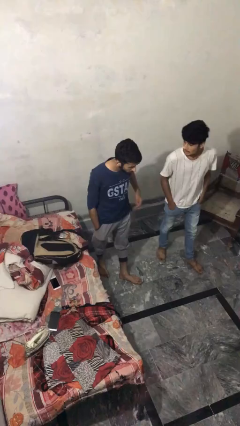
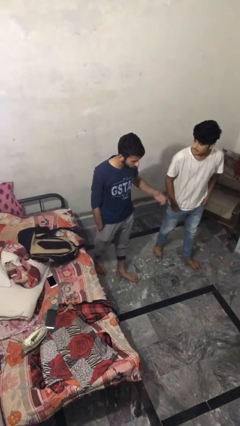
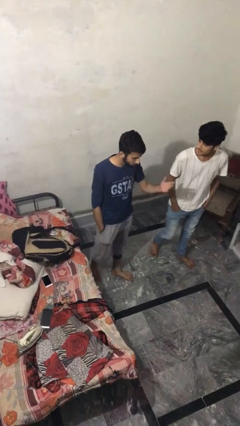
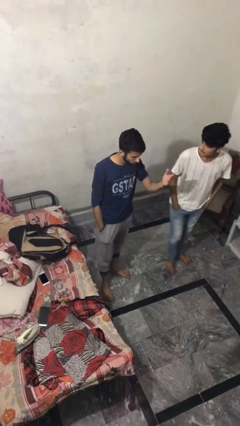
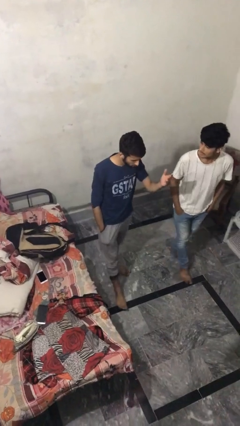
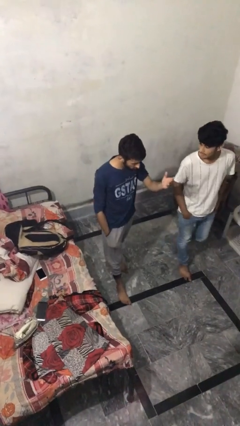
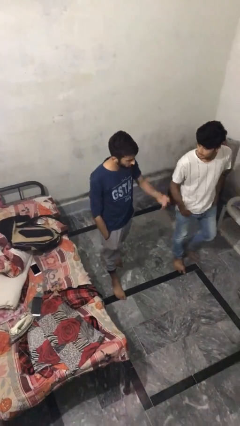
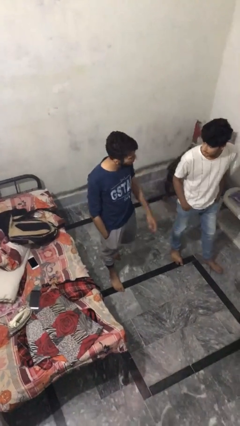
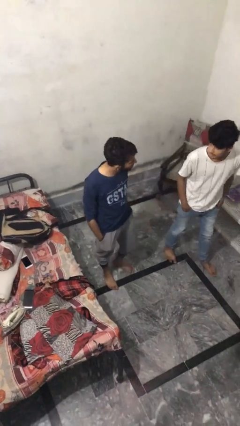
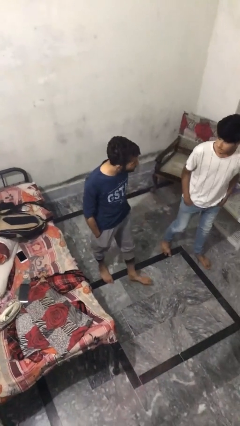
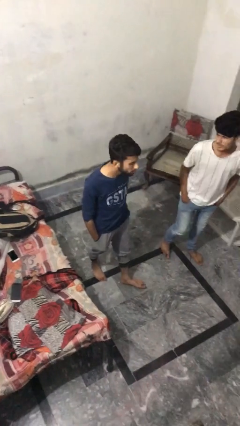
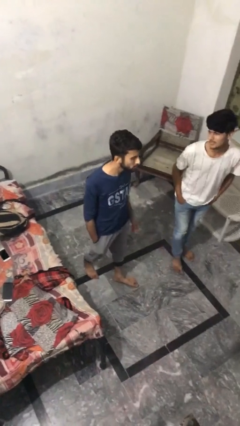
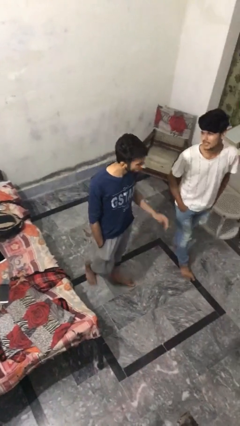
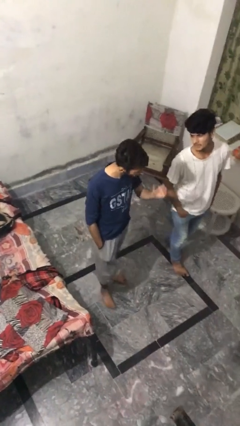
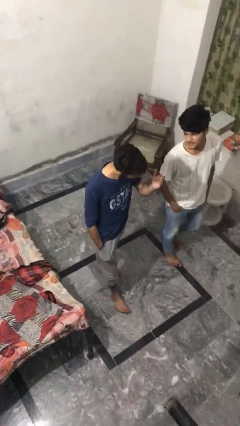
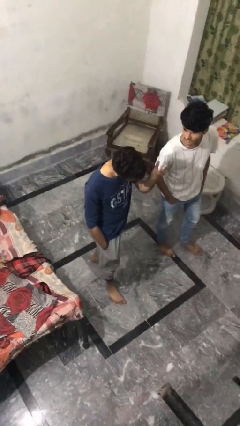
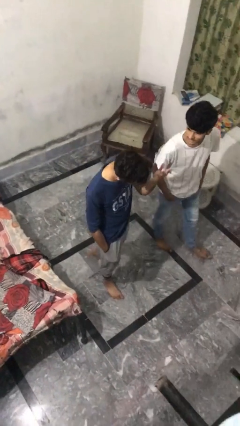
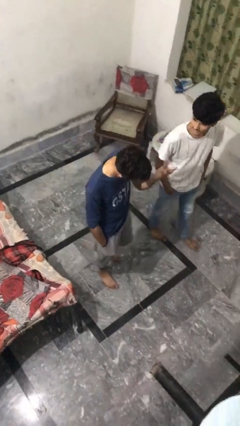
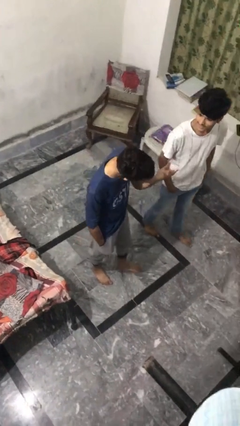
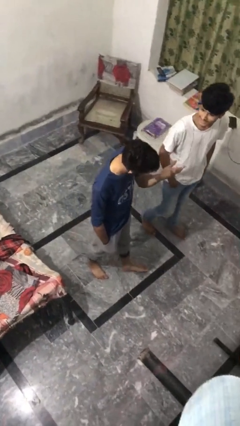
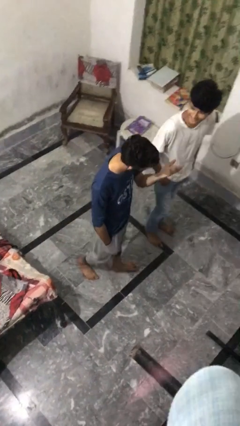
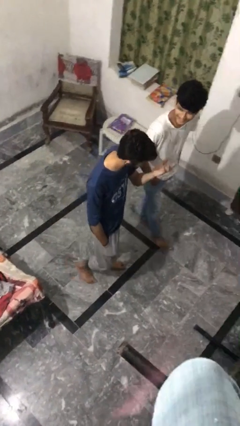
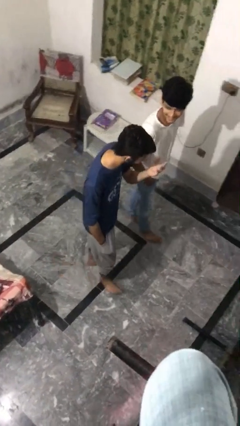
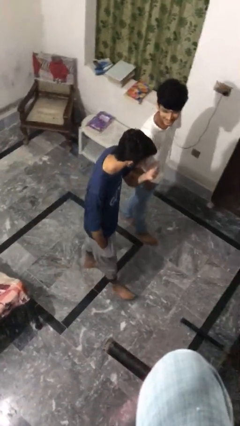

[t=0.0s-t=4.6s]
person talks to person

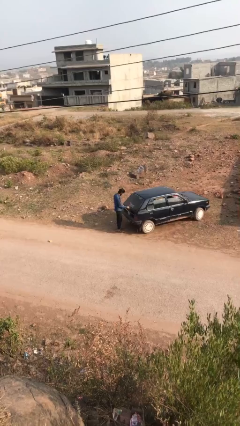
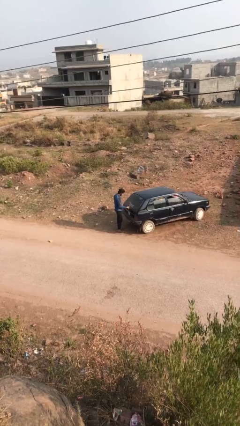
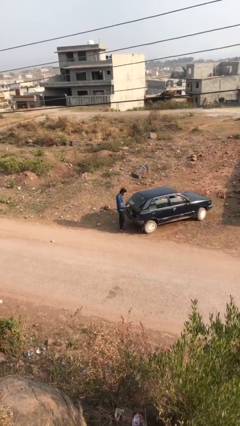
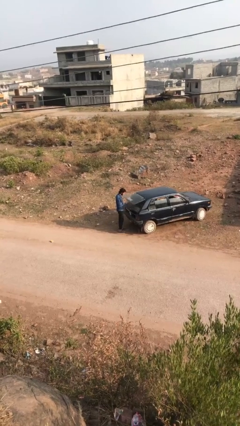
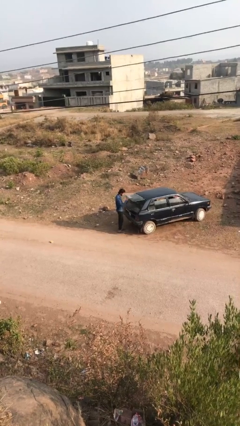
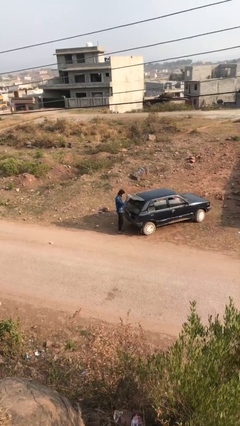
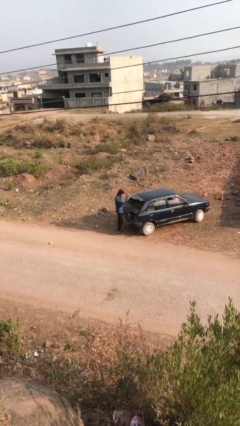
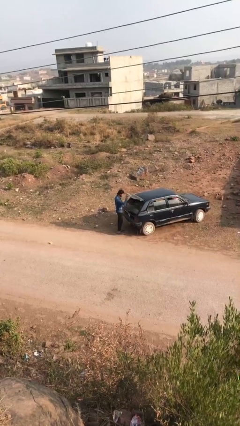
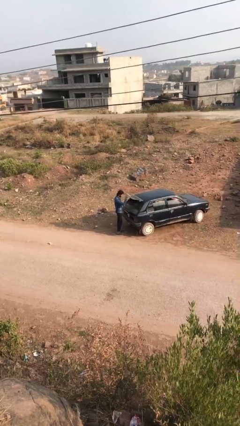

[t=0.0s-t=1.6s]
person opens car trunk

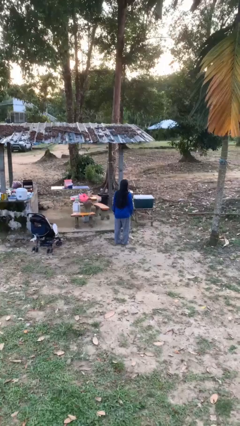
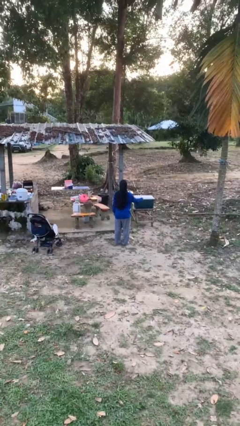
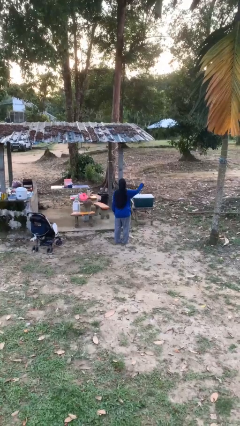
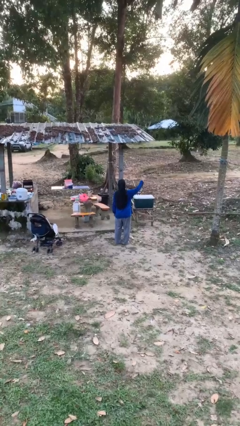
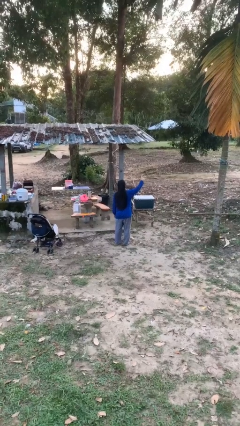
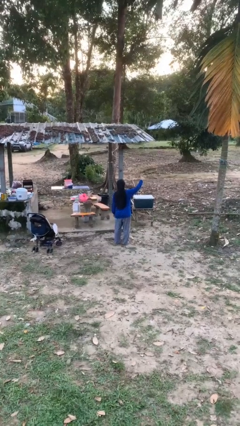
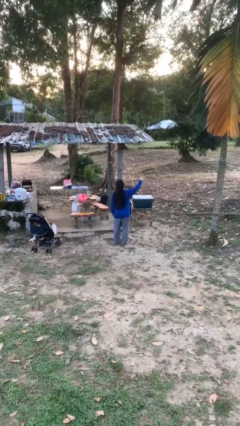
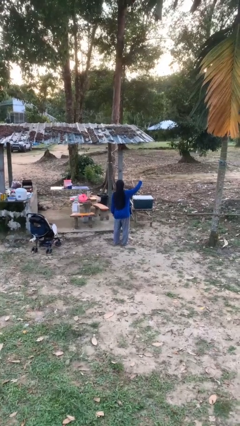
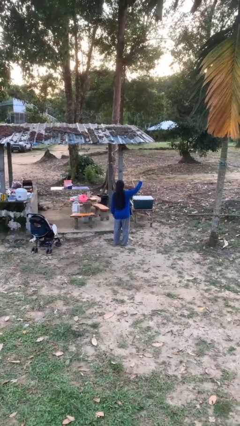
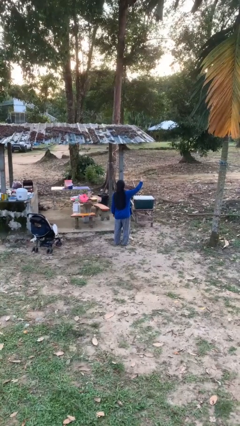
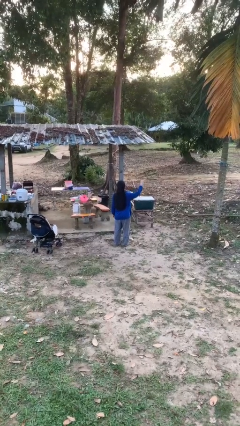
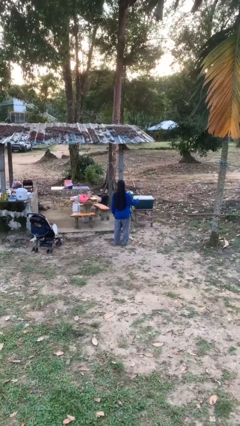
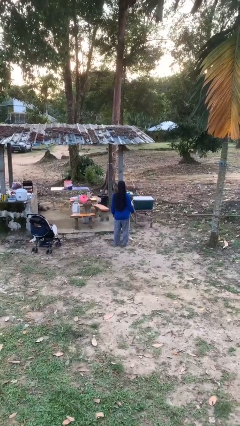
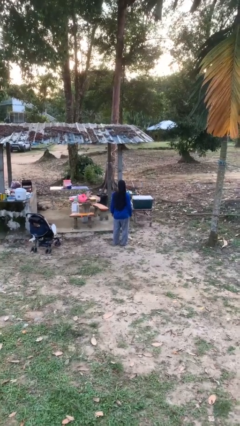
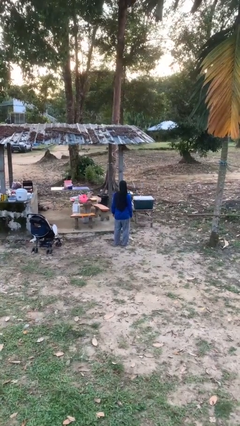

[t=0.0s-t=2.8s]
person gestures number three

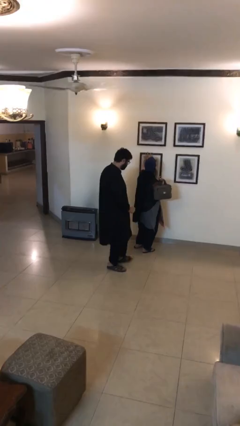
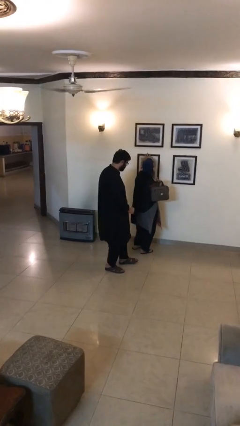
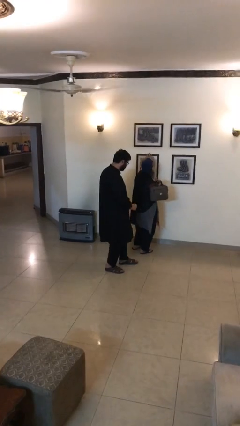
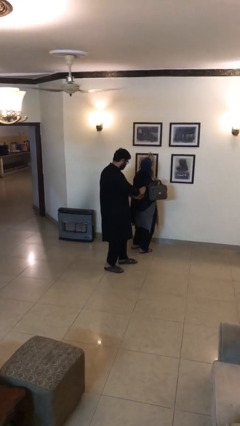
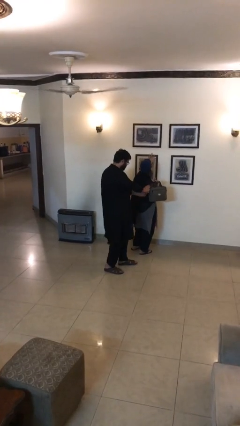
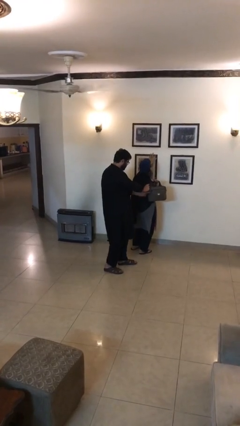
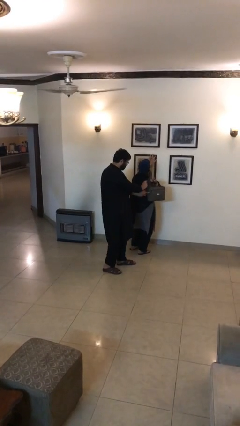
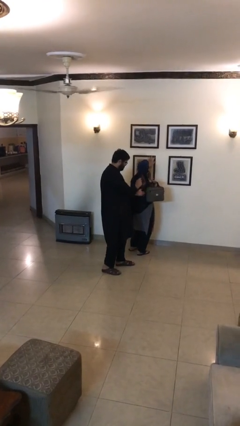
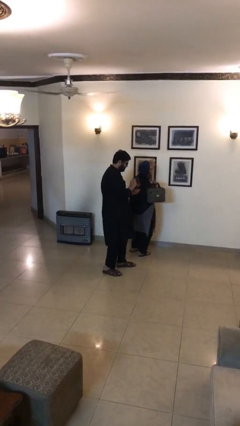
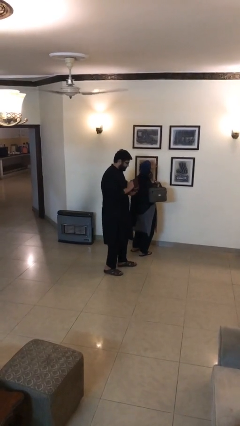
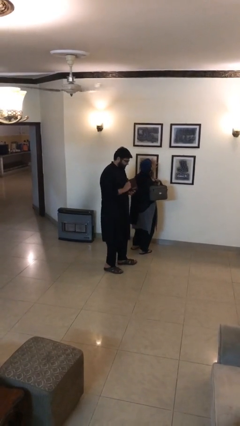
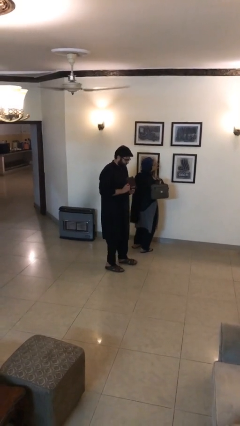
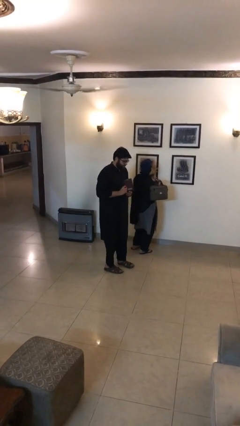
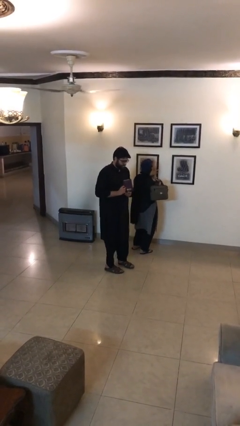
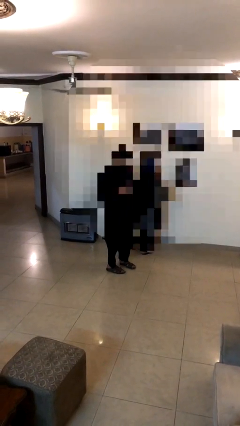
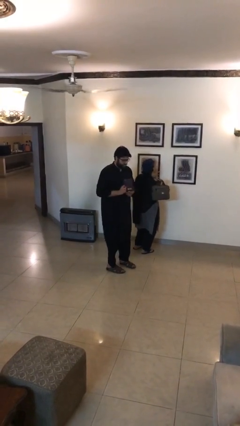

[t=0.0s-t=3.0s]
person steals object from person

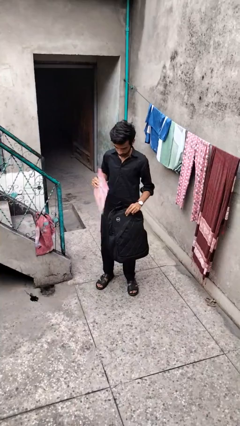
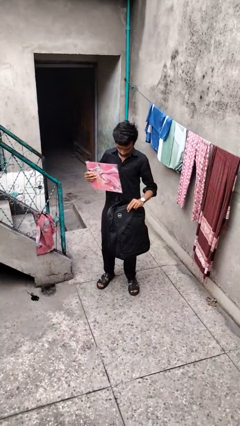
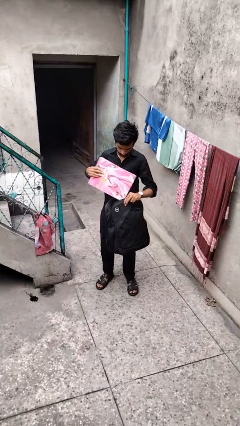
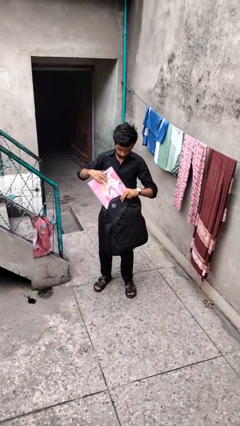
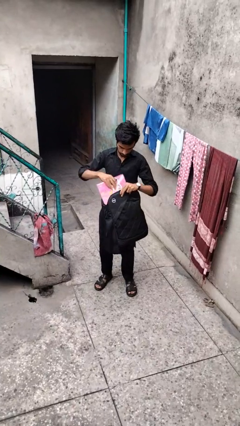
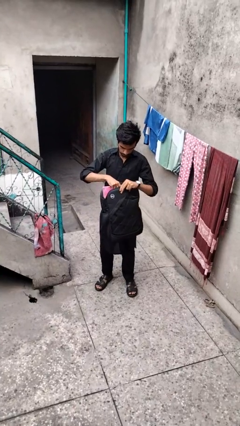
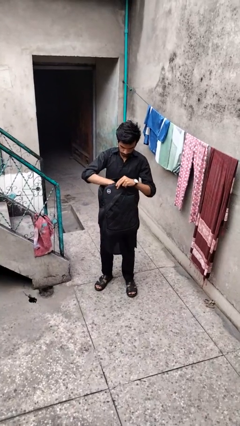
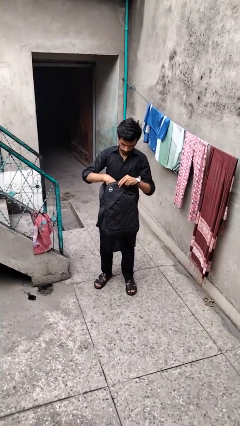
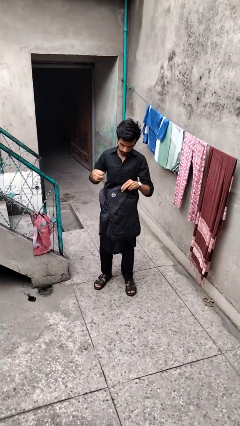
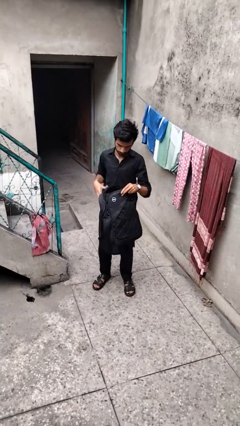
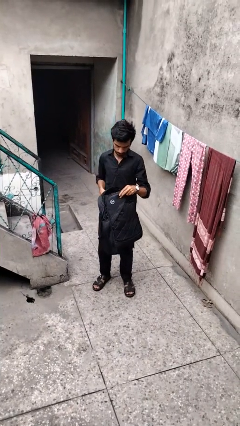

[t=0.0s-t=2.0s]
person puts object into backpack

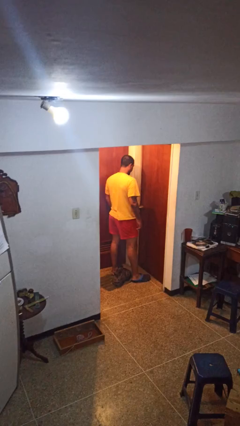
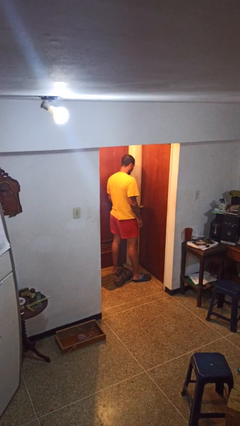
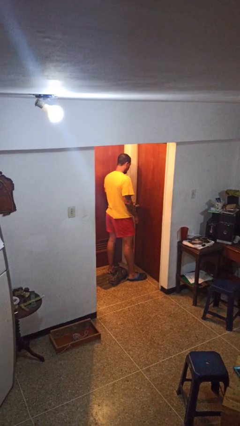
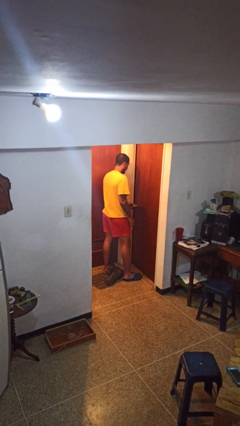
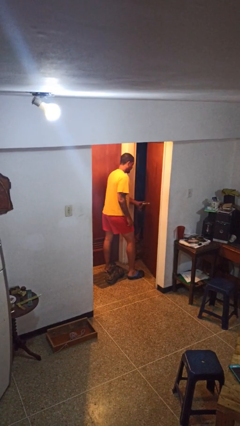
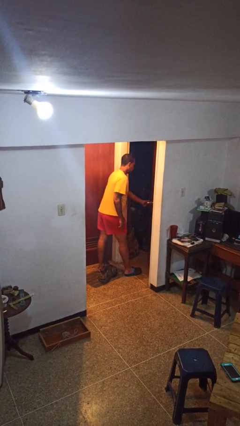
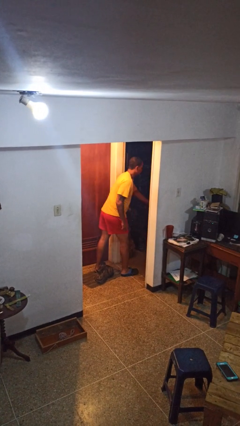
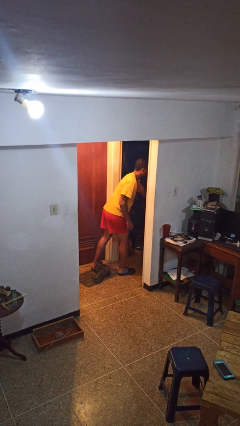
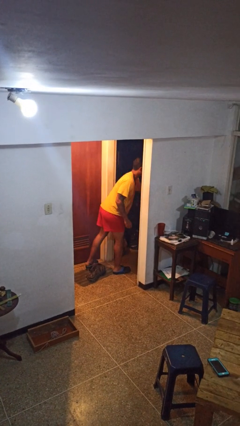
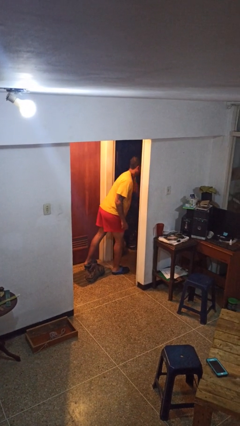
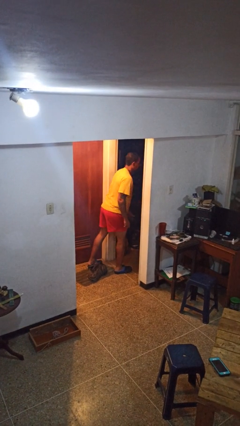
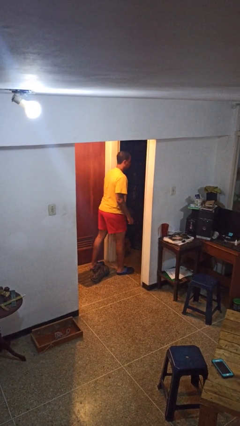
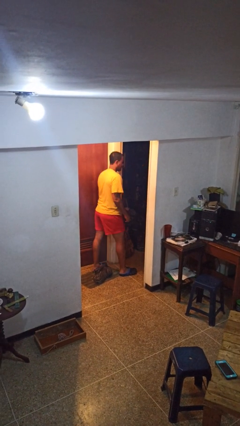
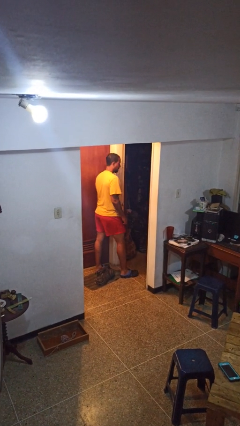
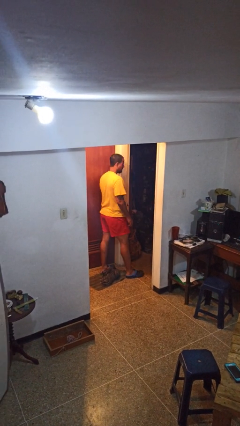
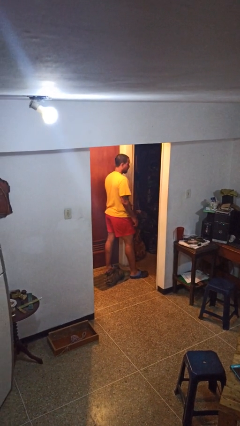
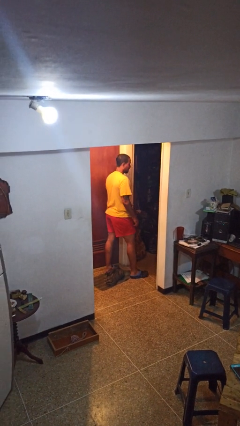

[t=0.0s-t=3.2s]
person opens facility door
